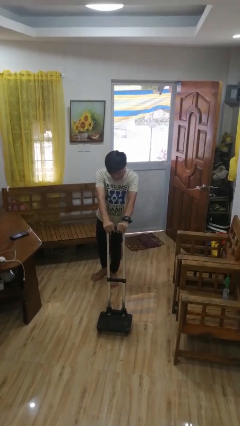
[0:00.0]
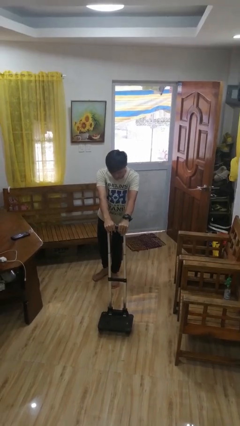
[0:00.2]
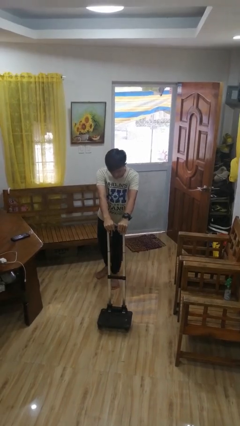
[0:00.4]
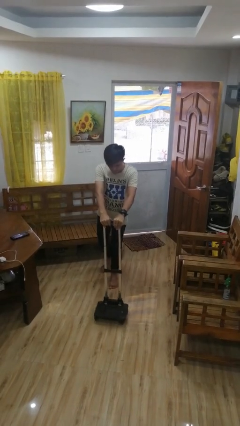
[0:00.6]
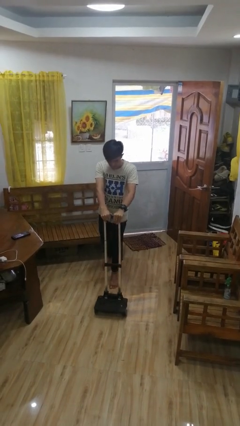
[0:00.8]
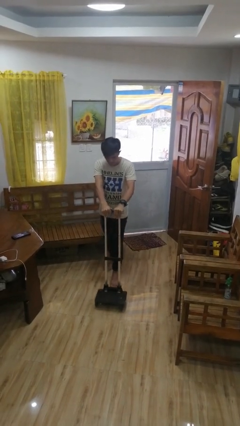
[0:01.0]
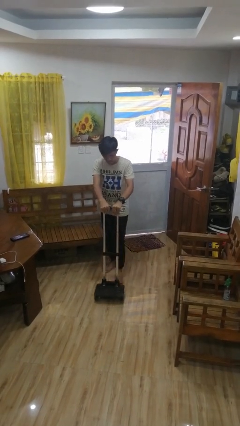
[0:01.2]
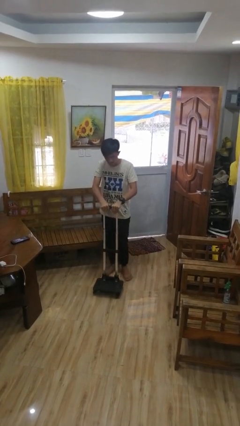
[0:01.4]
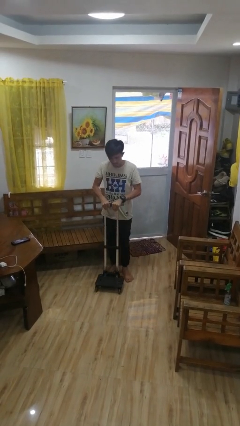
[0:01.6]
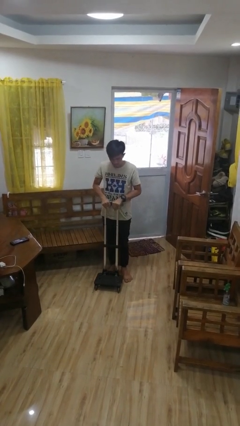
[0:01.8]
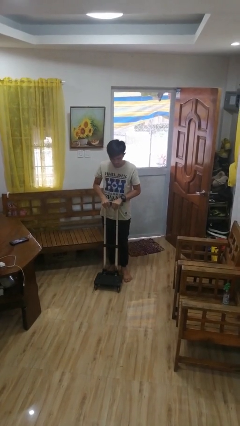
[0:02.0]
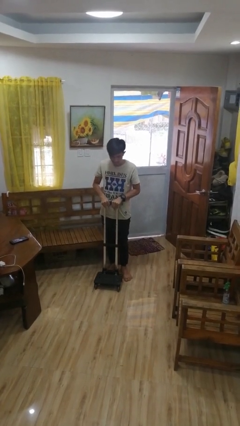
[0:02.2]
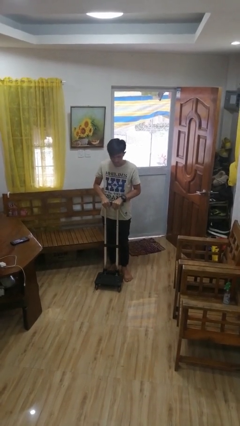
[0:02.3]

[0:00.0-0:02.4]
person pulls wheeled cart

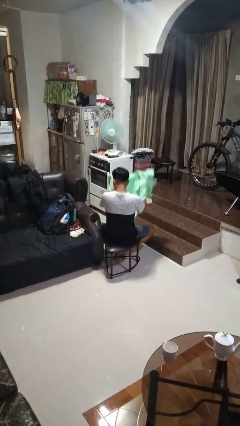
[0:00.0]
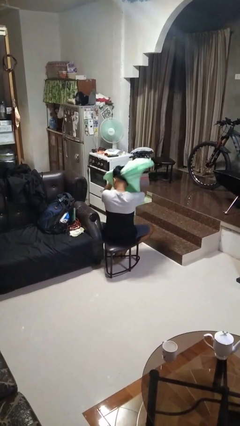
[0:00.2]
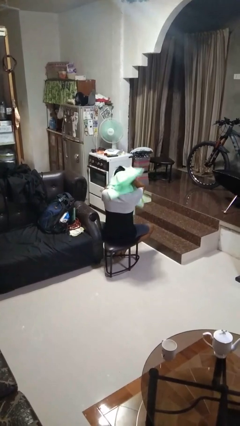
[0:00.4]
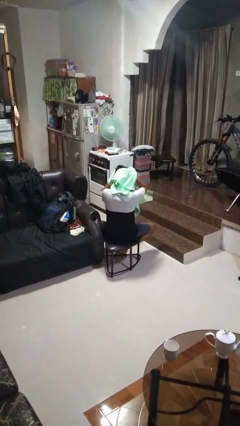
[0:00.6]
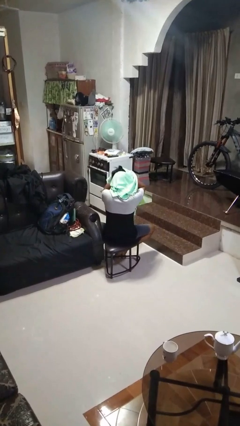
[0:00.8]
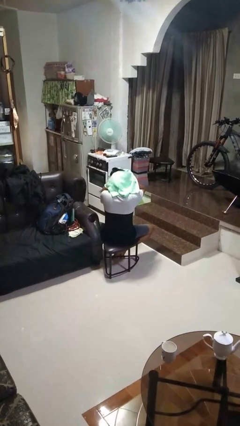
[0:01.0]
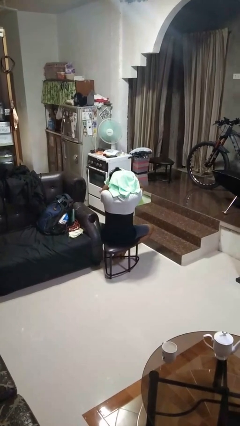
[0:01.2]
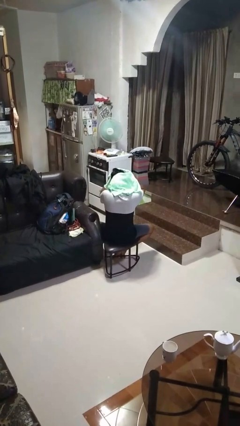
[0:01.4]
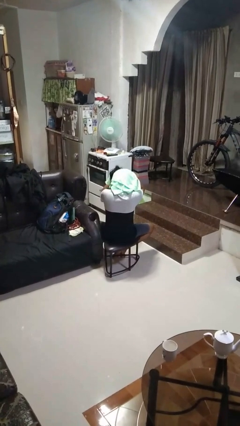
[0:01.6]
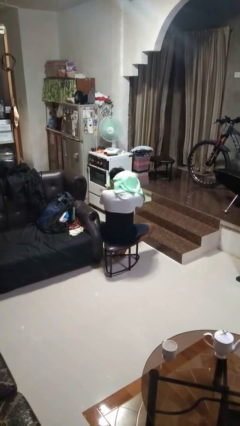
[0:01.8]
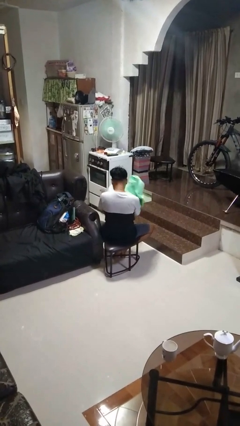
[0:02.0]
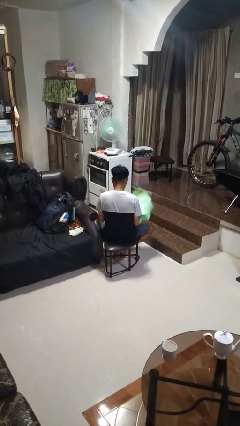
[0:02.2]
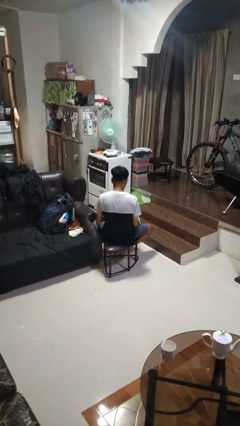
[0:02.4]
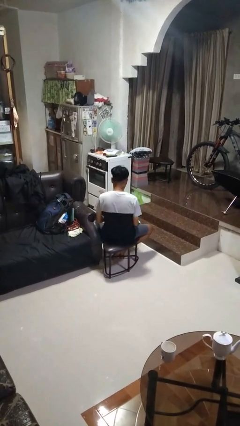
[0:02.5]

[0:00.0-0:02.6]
person dries hair with towel

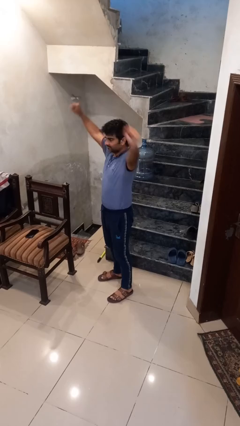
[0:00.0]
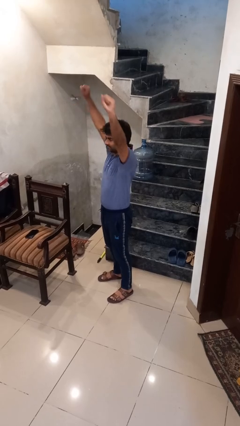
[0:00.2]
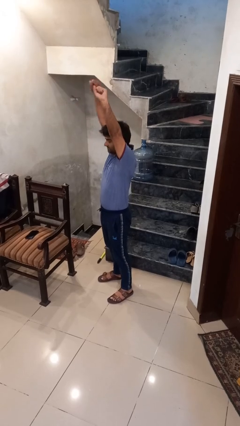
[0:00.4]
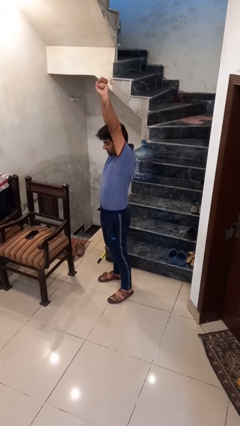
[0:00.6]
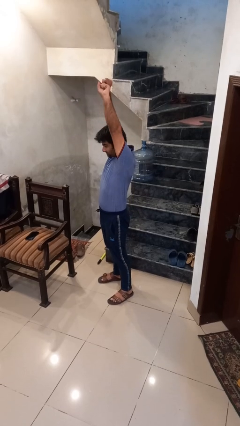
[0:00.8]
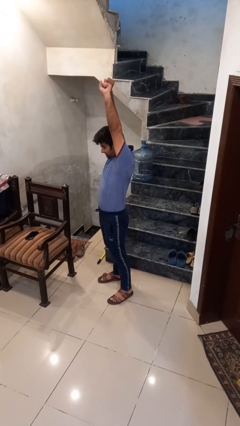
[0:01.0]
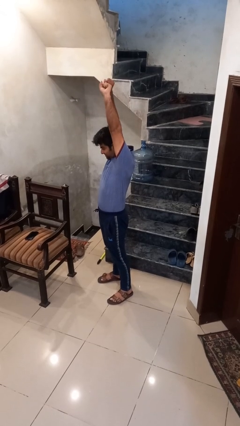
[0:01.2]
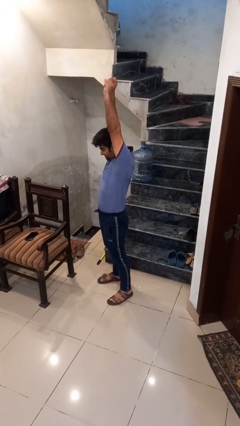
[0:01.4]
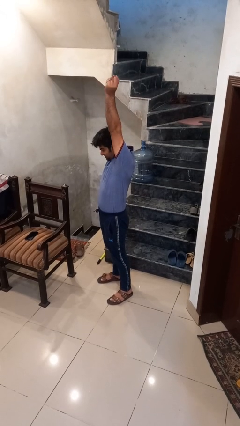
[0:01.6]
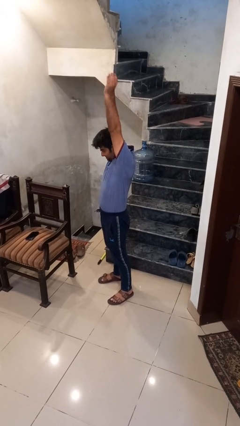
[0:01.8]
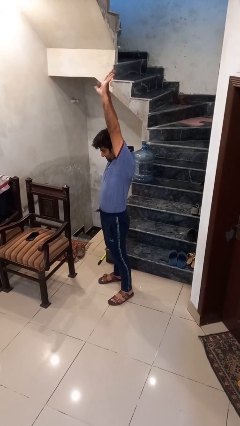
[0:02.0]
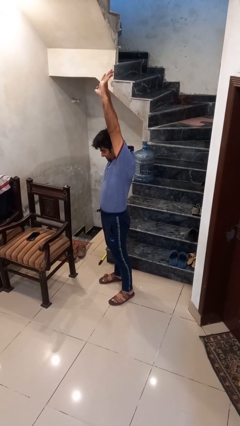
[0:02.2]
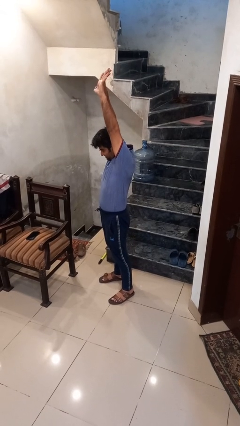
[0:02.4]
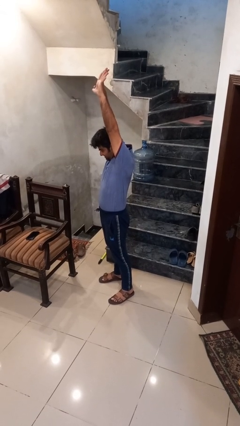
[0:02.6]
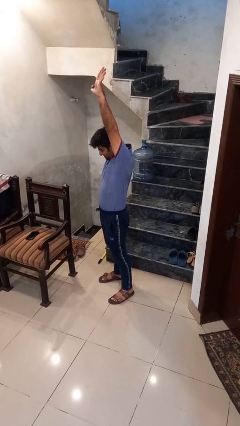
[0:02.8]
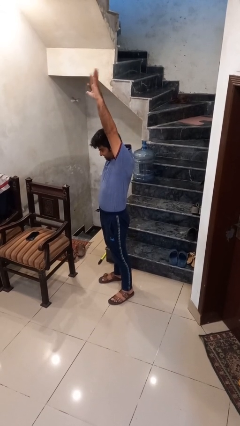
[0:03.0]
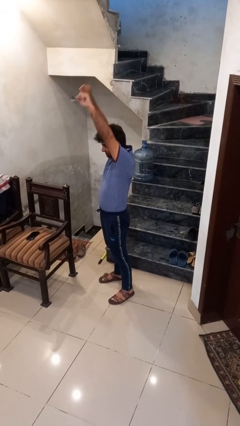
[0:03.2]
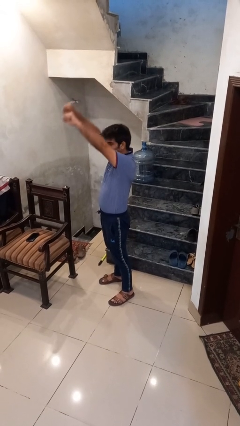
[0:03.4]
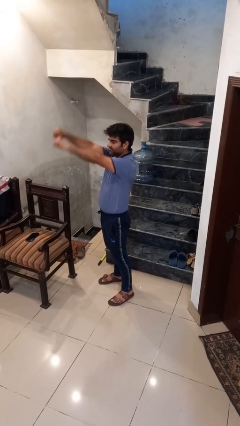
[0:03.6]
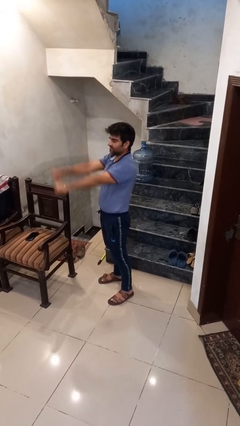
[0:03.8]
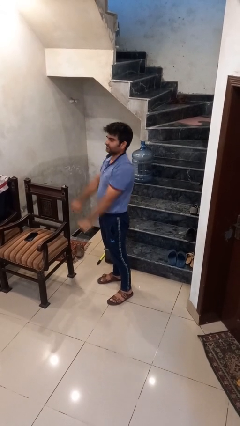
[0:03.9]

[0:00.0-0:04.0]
person stretches arms over head

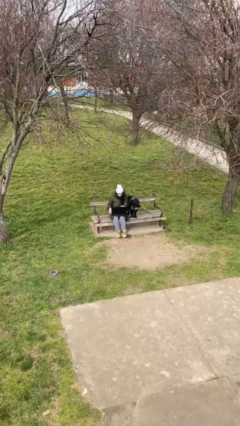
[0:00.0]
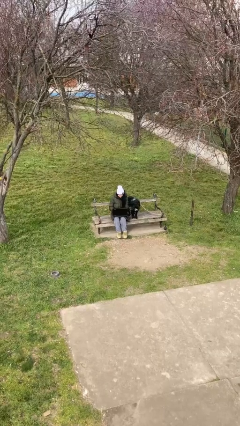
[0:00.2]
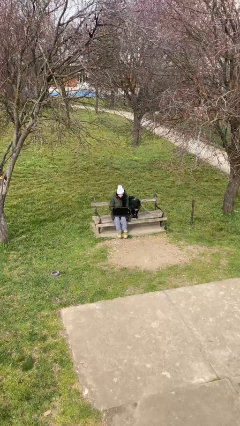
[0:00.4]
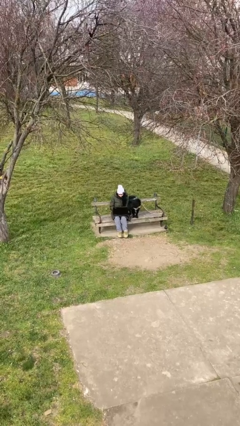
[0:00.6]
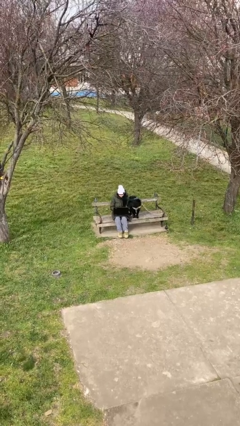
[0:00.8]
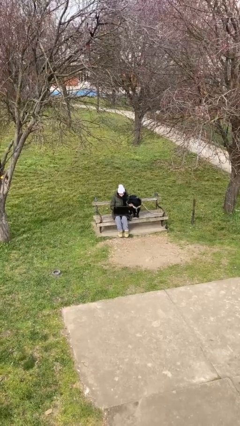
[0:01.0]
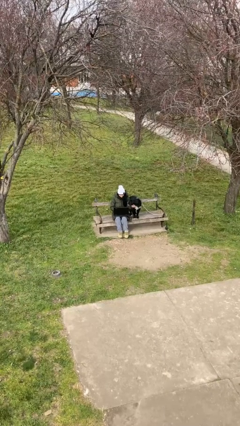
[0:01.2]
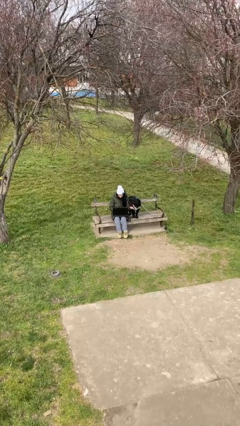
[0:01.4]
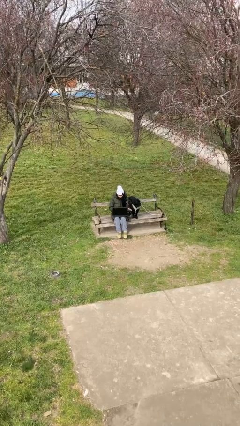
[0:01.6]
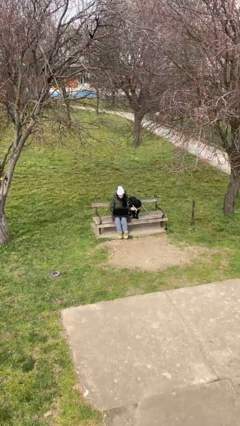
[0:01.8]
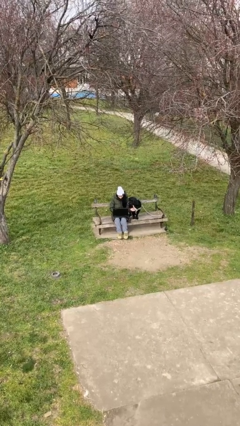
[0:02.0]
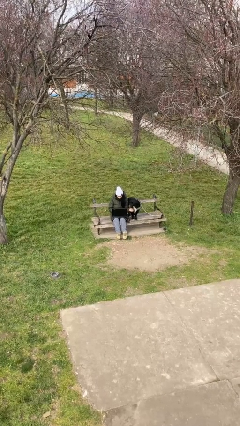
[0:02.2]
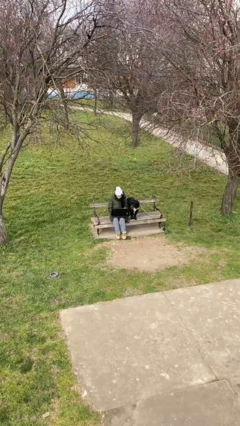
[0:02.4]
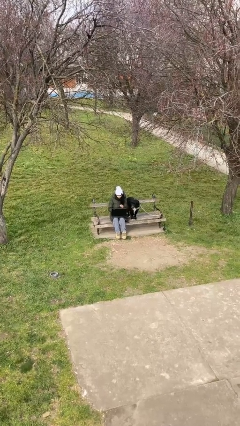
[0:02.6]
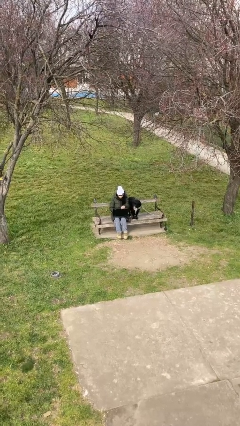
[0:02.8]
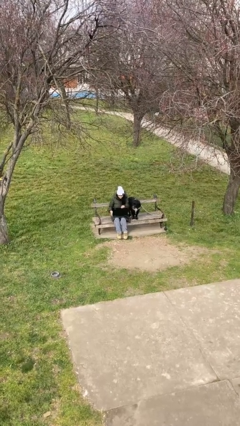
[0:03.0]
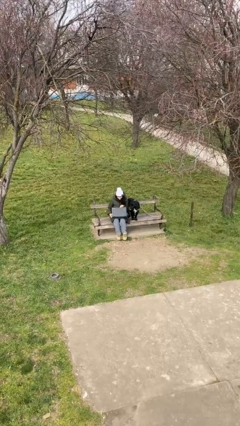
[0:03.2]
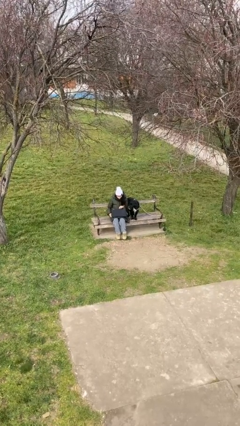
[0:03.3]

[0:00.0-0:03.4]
person interacts with laptop

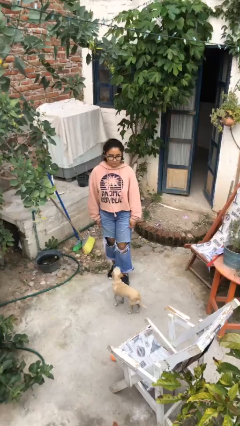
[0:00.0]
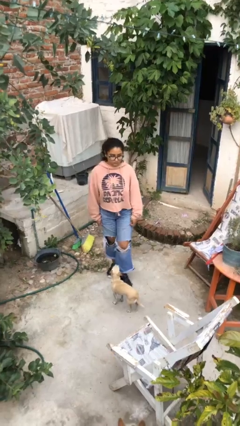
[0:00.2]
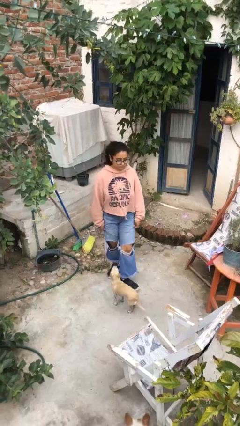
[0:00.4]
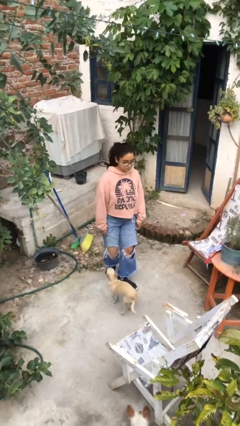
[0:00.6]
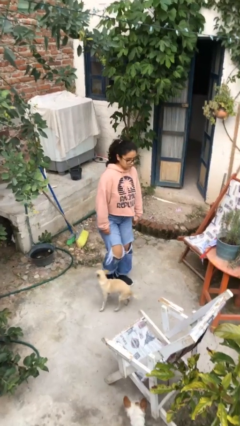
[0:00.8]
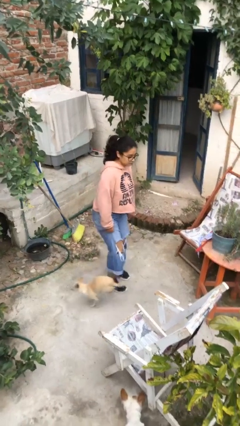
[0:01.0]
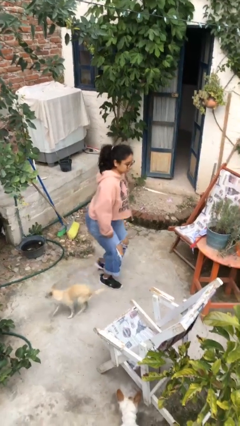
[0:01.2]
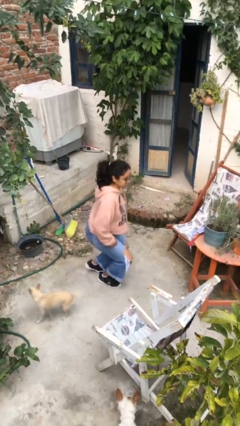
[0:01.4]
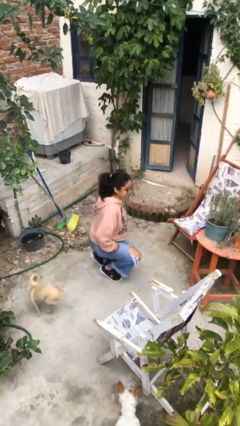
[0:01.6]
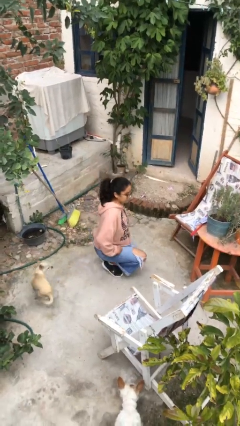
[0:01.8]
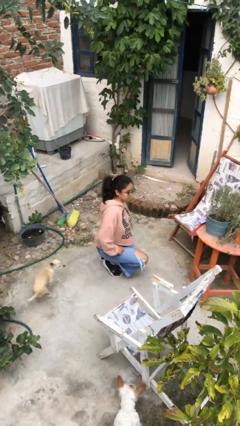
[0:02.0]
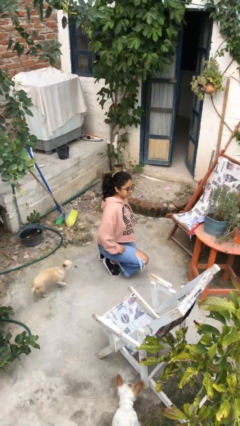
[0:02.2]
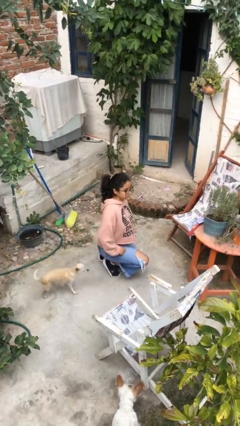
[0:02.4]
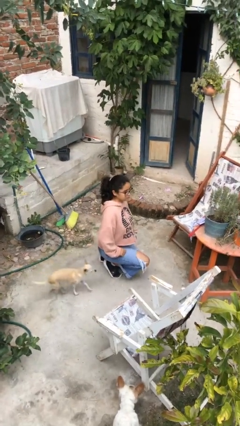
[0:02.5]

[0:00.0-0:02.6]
person kneels

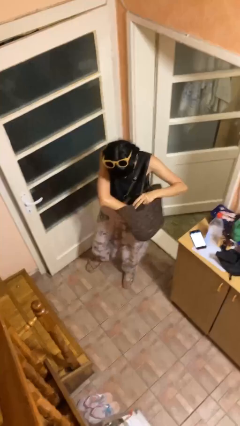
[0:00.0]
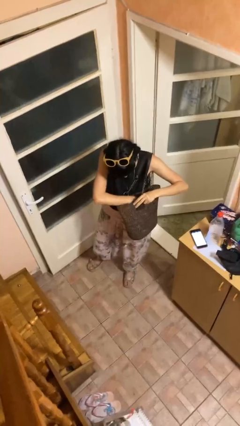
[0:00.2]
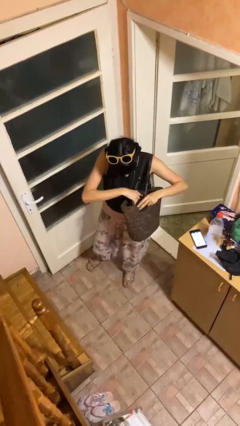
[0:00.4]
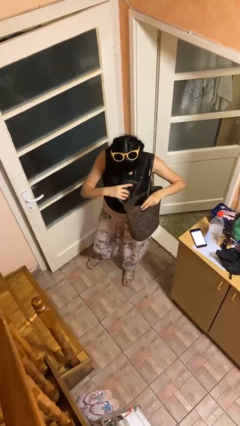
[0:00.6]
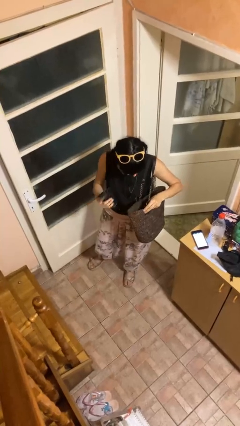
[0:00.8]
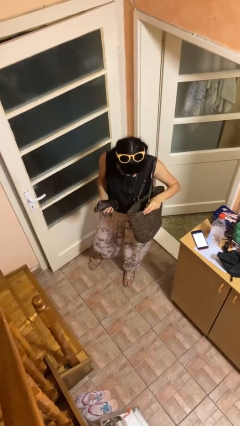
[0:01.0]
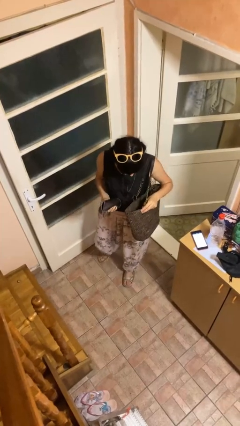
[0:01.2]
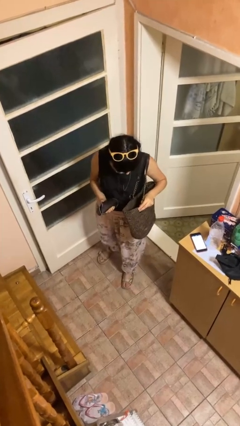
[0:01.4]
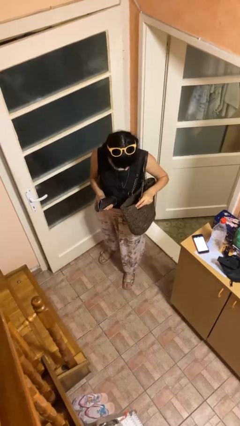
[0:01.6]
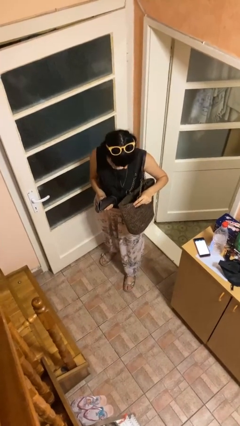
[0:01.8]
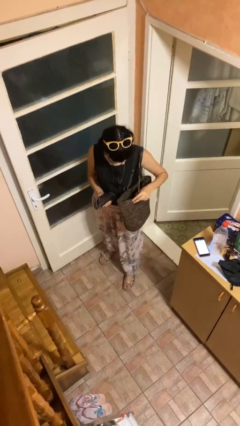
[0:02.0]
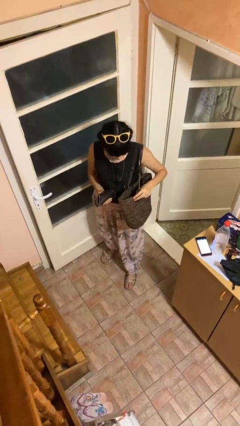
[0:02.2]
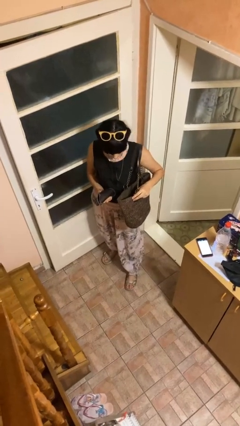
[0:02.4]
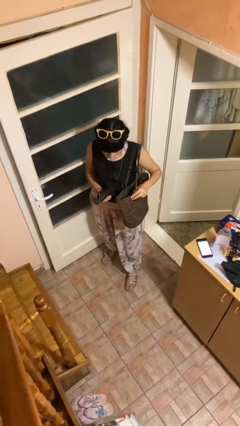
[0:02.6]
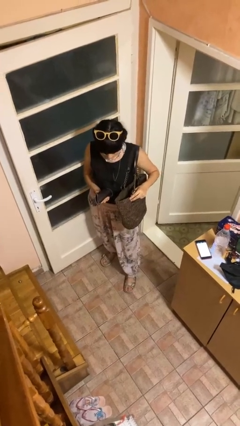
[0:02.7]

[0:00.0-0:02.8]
person takes object from purse
